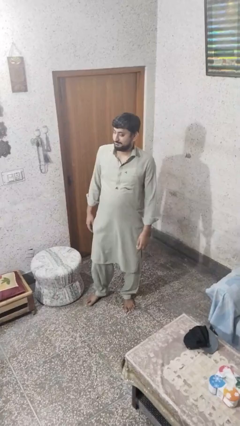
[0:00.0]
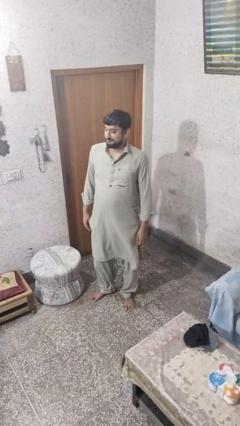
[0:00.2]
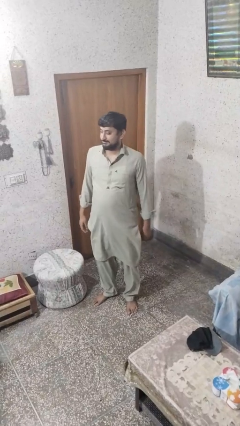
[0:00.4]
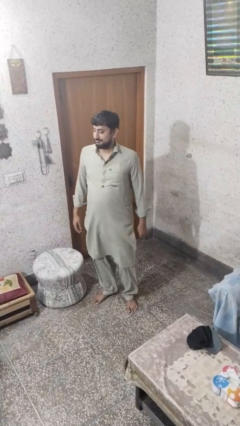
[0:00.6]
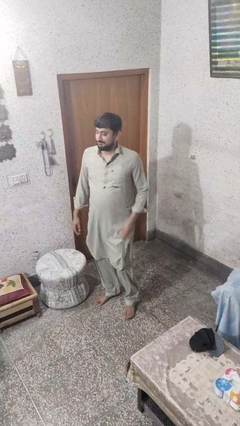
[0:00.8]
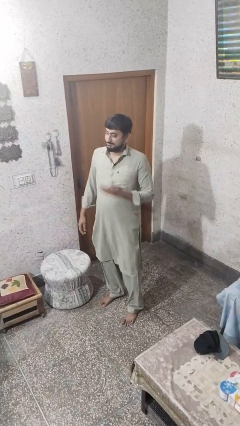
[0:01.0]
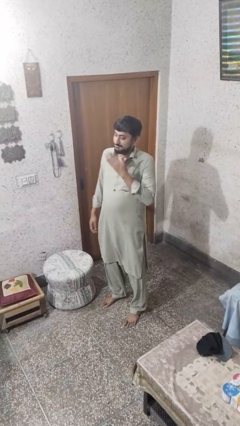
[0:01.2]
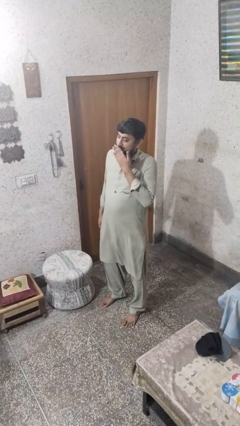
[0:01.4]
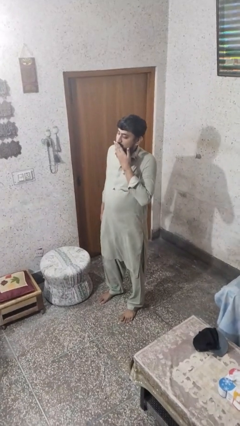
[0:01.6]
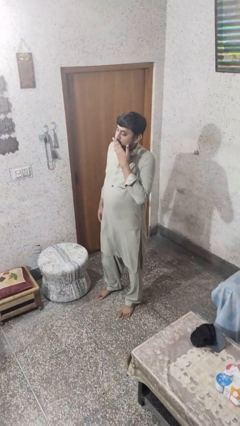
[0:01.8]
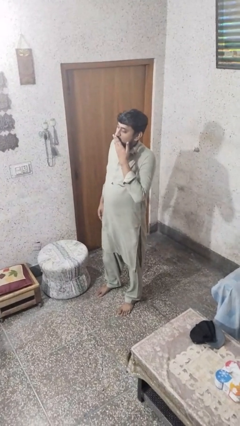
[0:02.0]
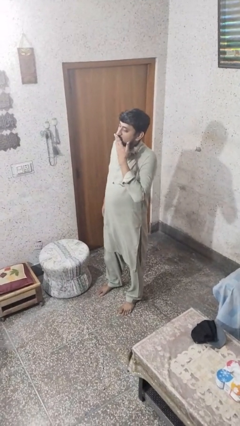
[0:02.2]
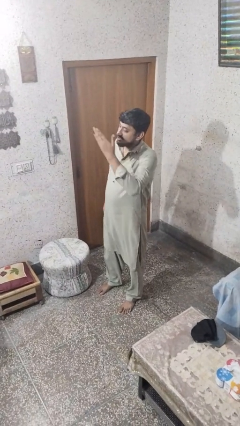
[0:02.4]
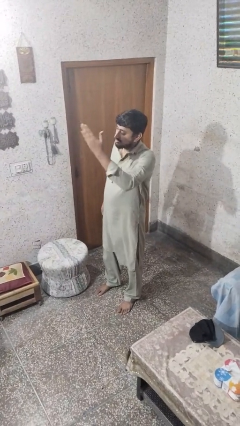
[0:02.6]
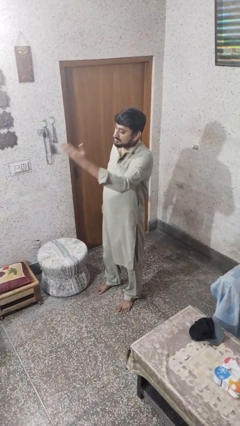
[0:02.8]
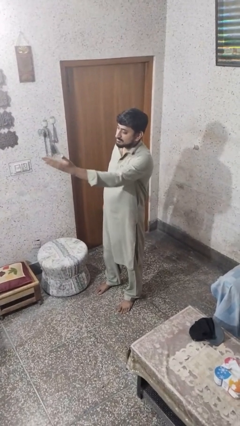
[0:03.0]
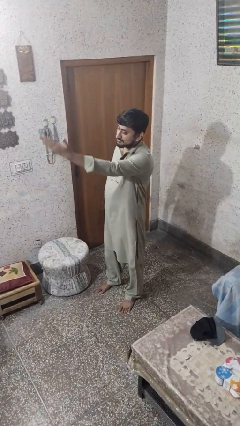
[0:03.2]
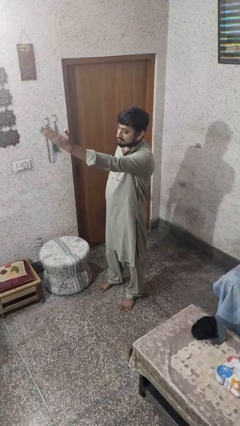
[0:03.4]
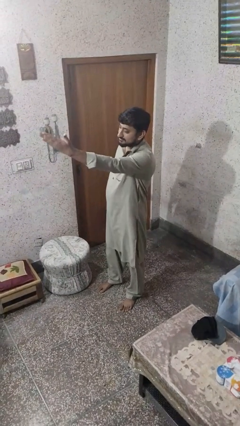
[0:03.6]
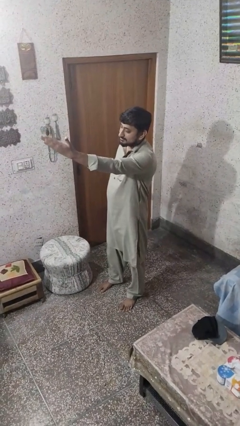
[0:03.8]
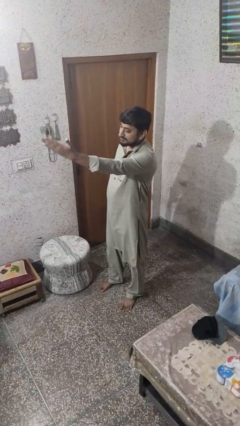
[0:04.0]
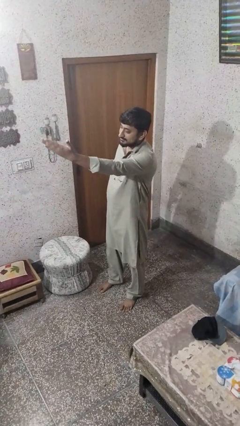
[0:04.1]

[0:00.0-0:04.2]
person gestures blow kiss

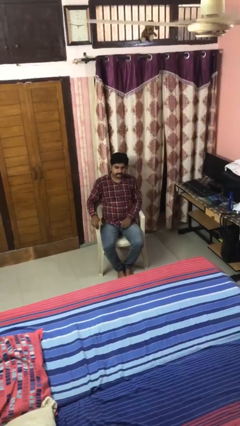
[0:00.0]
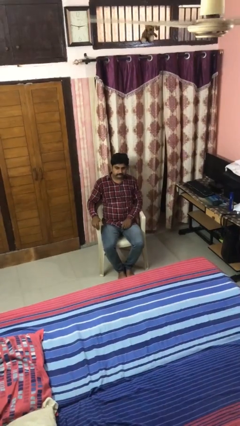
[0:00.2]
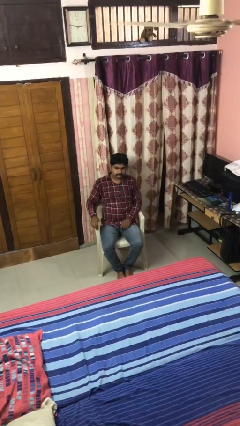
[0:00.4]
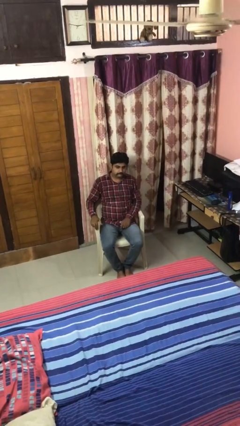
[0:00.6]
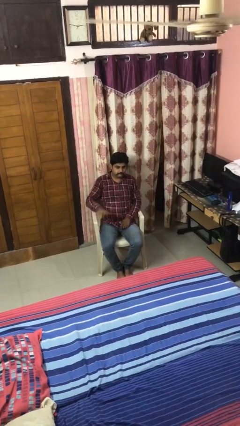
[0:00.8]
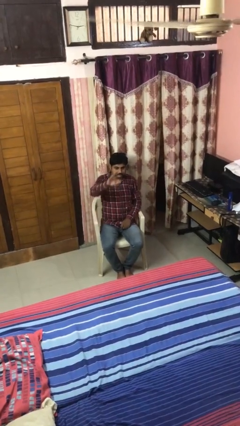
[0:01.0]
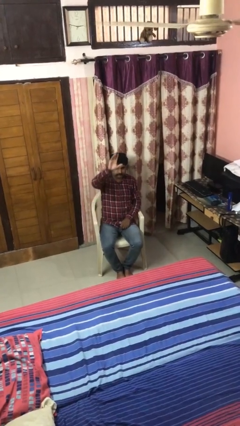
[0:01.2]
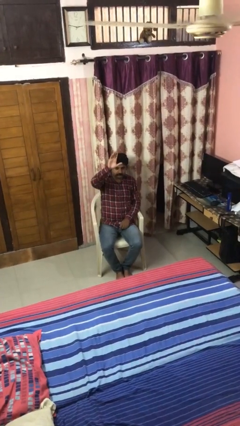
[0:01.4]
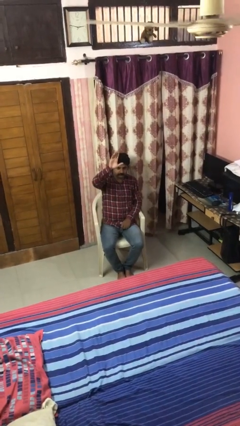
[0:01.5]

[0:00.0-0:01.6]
person gestures raise hand

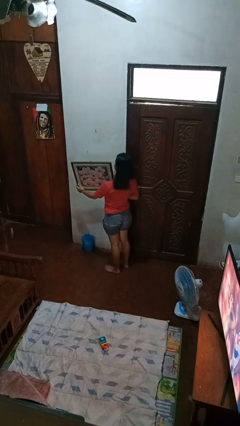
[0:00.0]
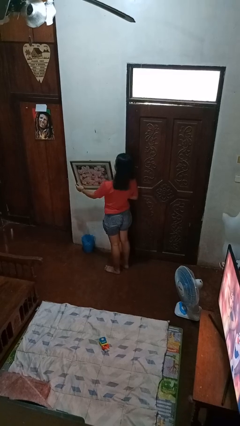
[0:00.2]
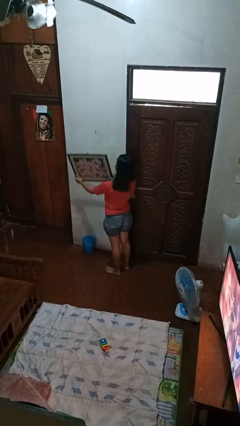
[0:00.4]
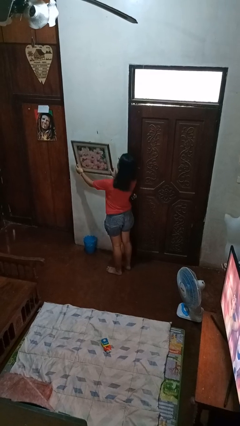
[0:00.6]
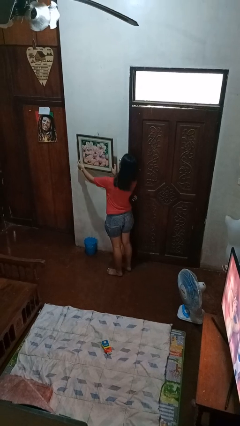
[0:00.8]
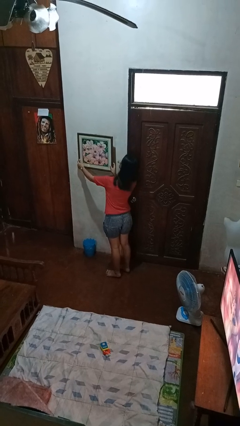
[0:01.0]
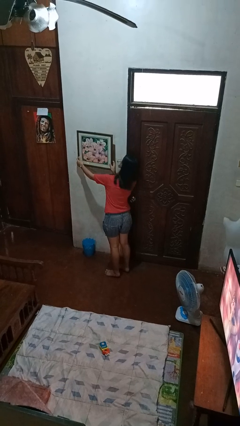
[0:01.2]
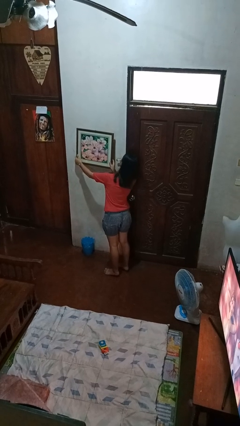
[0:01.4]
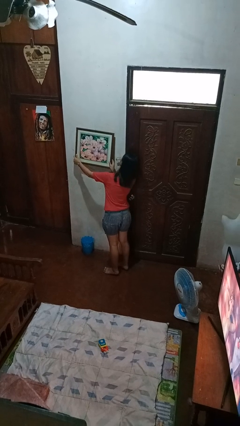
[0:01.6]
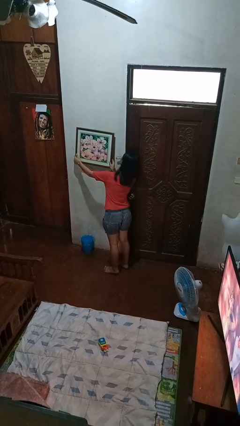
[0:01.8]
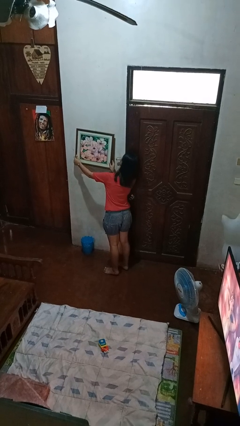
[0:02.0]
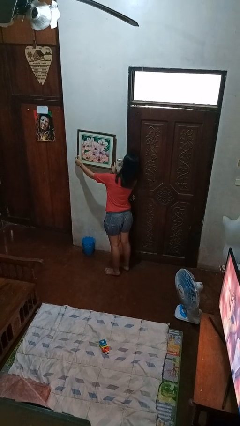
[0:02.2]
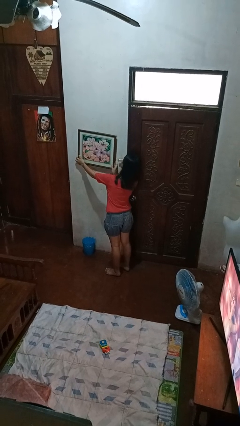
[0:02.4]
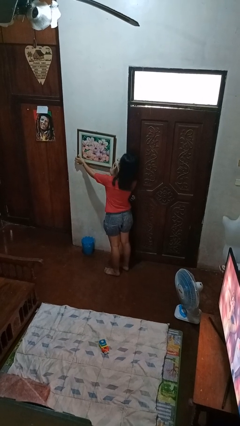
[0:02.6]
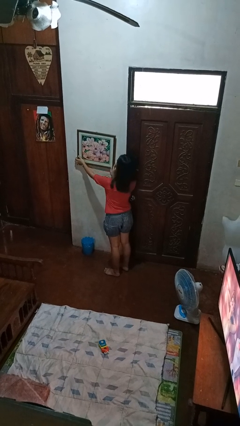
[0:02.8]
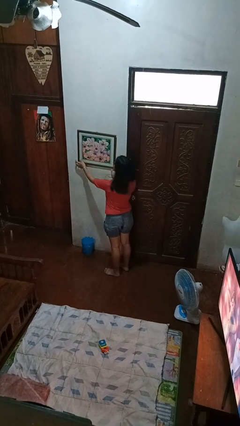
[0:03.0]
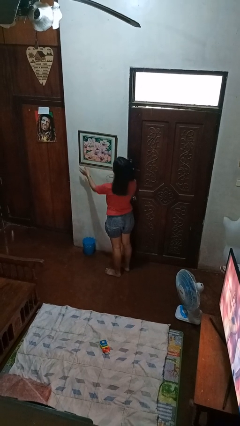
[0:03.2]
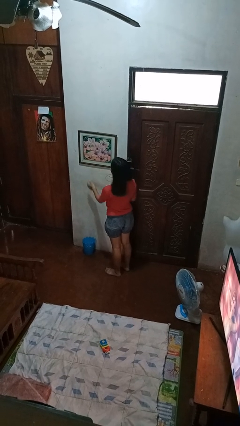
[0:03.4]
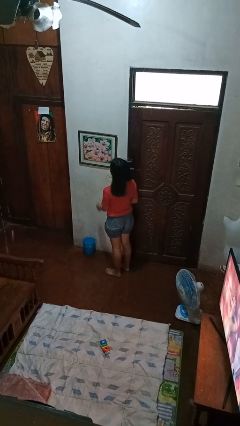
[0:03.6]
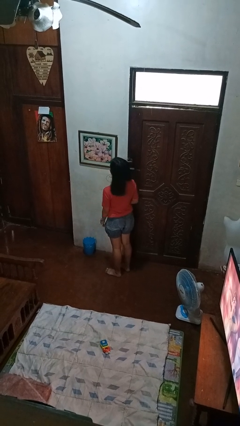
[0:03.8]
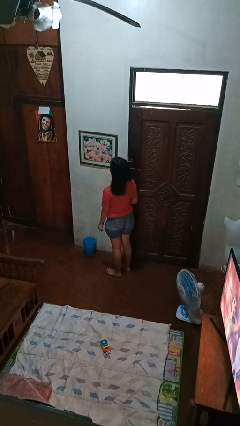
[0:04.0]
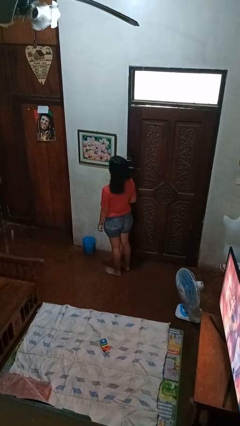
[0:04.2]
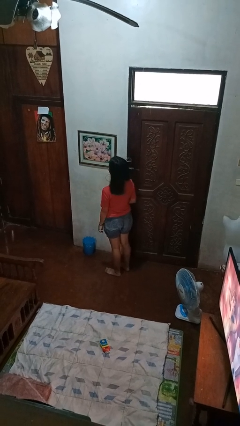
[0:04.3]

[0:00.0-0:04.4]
person puts up picture frame

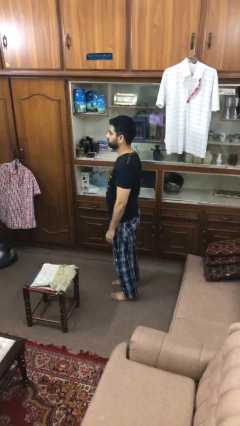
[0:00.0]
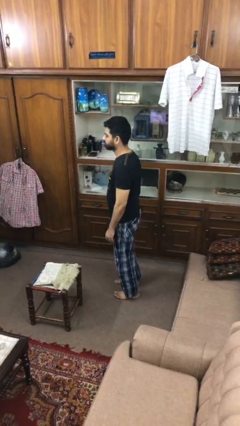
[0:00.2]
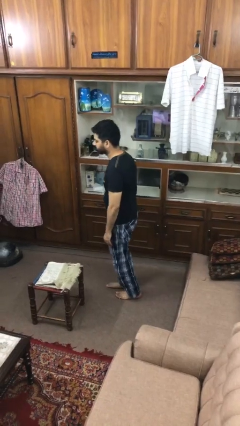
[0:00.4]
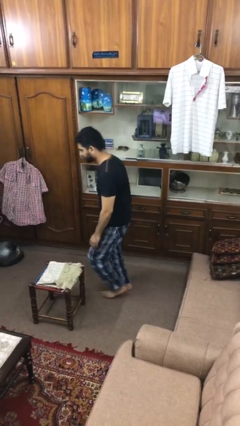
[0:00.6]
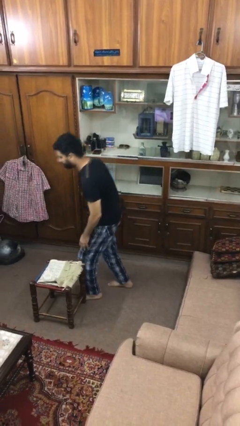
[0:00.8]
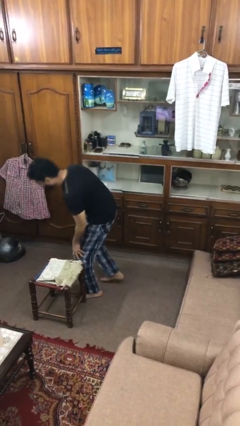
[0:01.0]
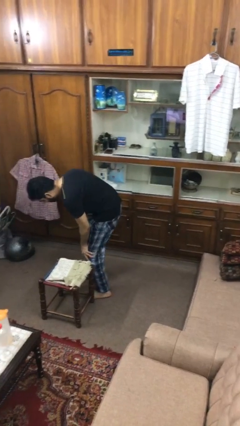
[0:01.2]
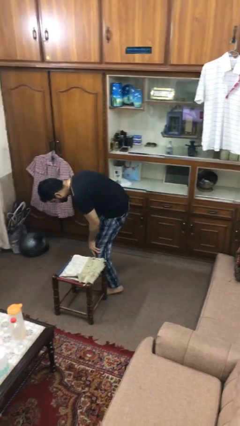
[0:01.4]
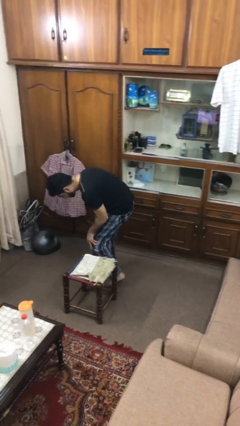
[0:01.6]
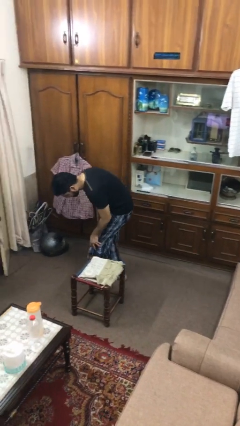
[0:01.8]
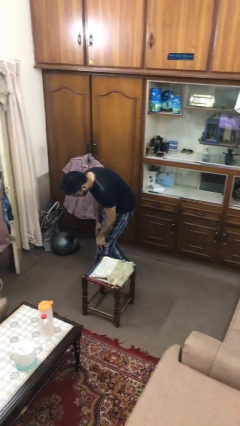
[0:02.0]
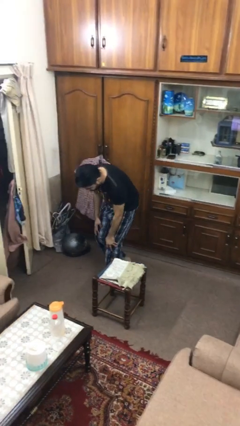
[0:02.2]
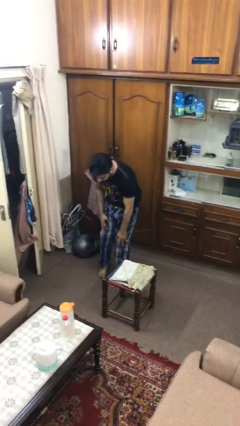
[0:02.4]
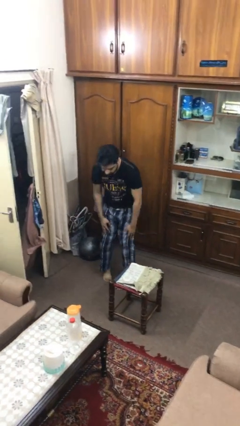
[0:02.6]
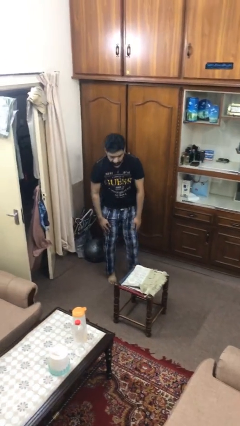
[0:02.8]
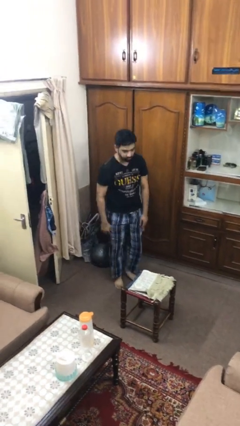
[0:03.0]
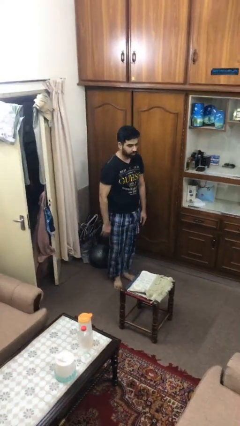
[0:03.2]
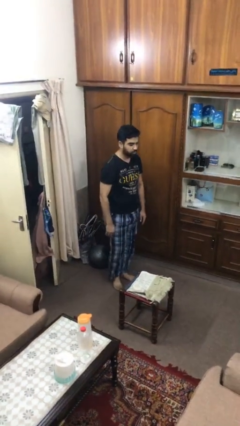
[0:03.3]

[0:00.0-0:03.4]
person bumps into table

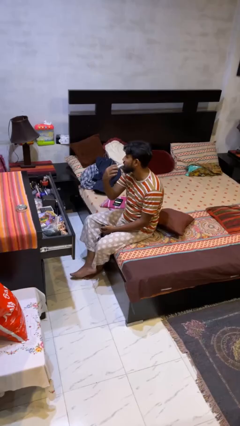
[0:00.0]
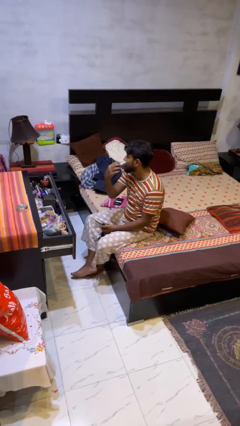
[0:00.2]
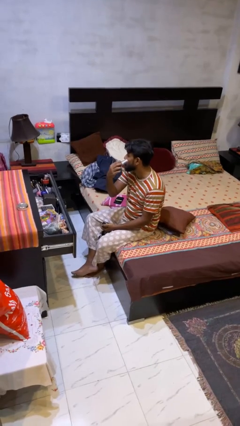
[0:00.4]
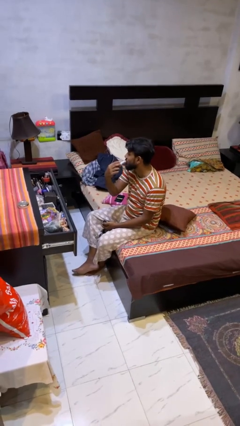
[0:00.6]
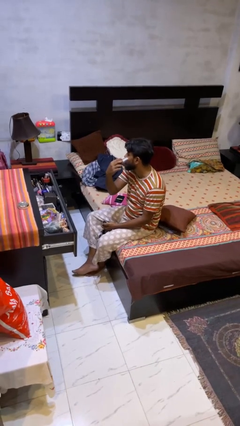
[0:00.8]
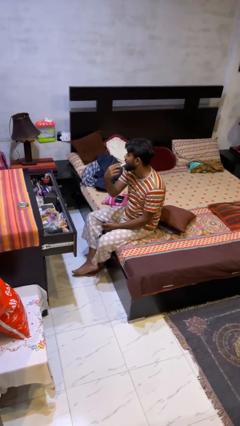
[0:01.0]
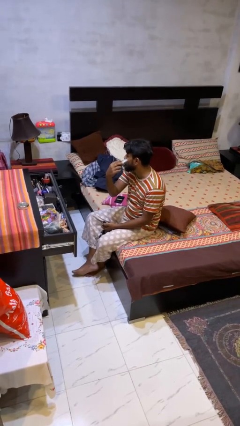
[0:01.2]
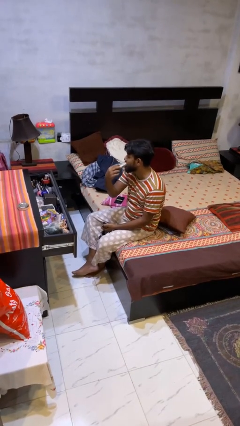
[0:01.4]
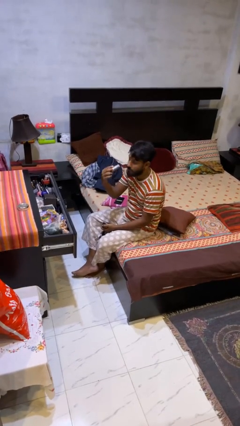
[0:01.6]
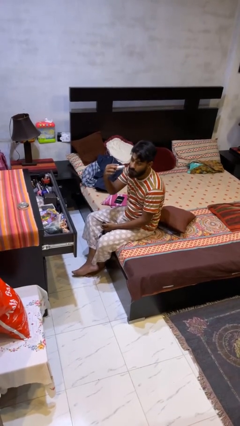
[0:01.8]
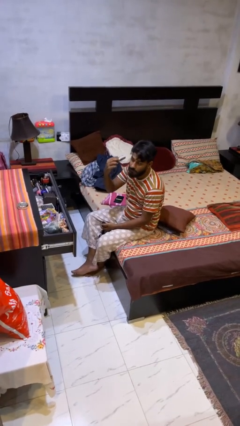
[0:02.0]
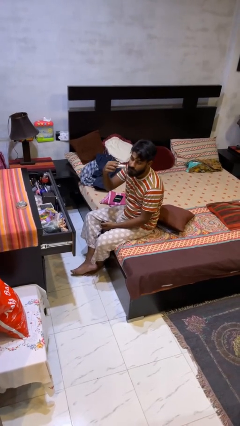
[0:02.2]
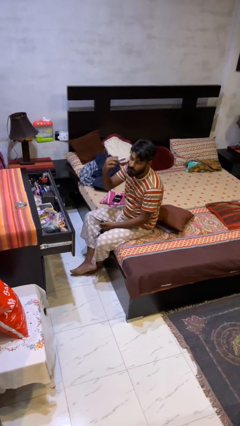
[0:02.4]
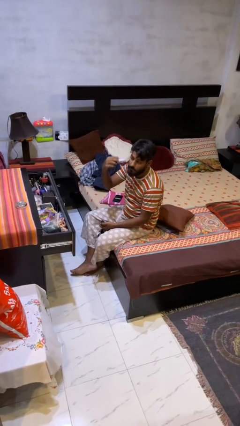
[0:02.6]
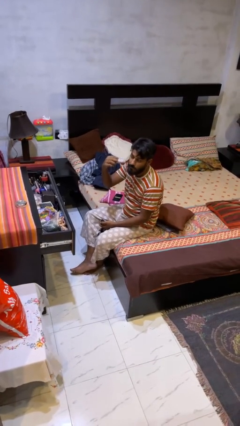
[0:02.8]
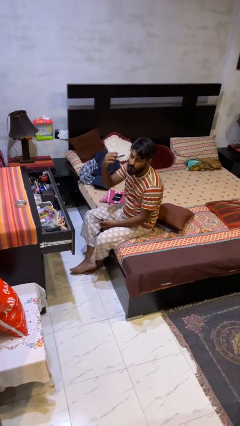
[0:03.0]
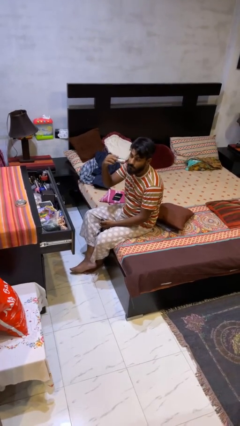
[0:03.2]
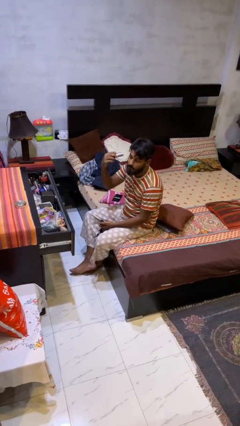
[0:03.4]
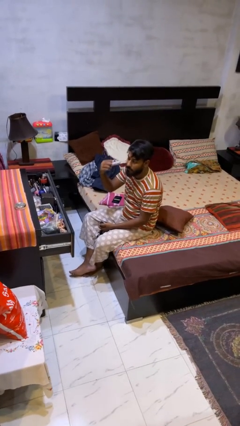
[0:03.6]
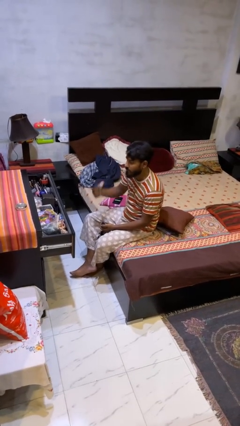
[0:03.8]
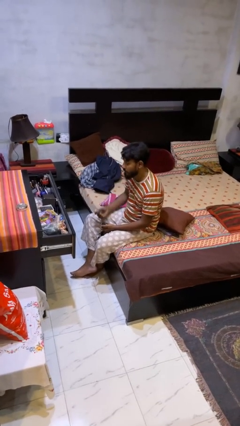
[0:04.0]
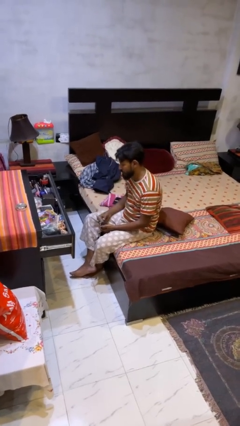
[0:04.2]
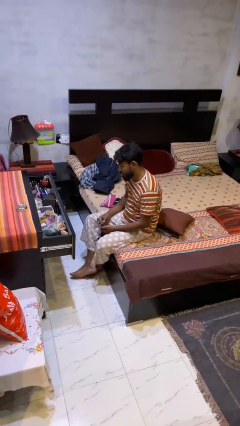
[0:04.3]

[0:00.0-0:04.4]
person applies foundation makeup
